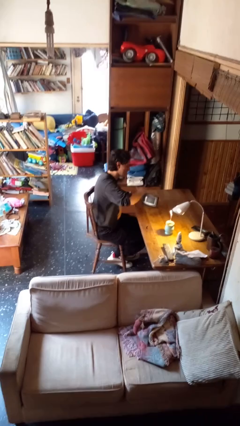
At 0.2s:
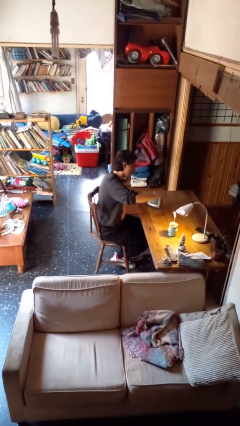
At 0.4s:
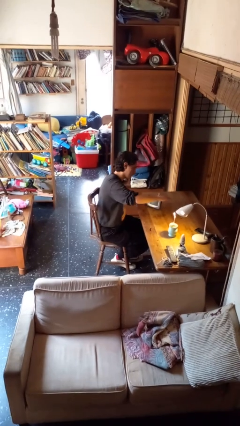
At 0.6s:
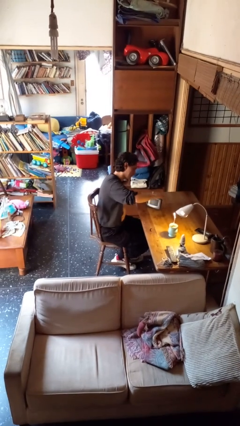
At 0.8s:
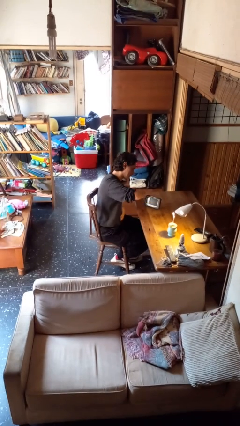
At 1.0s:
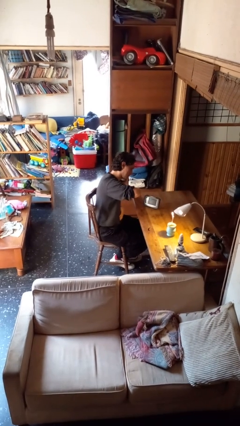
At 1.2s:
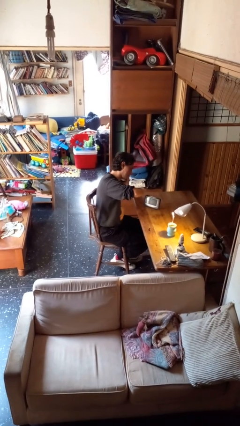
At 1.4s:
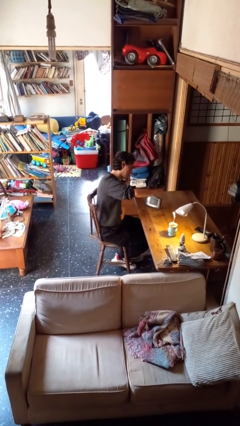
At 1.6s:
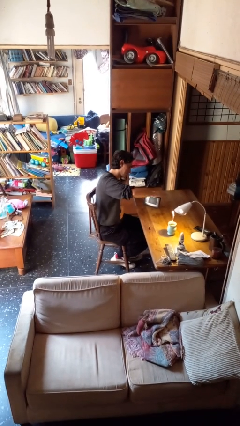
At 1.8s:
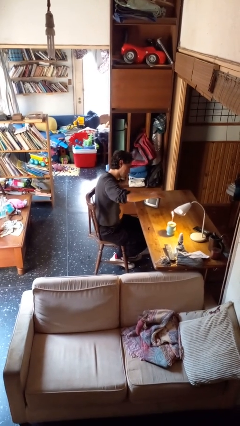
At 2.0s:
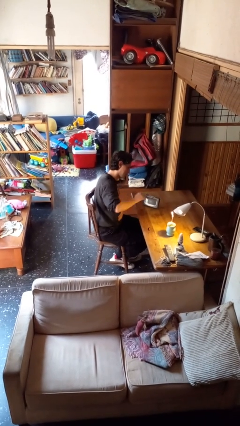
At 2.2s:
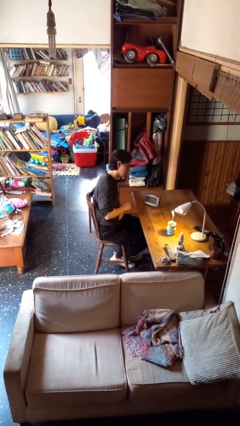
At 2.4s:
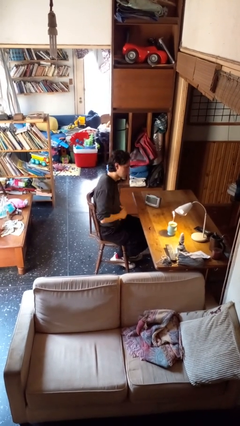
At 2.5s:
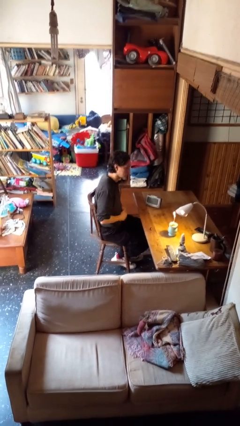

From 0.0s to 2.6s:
person waves hand over object

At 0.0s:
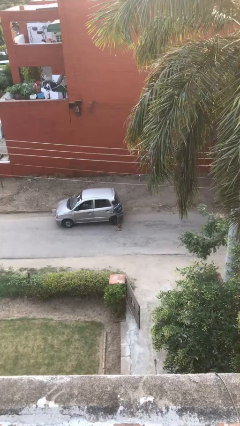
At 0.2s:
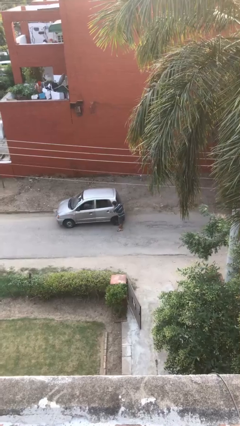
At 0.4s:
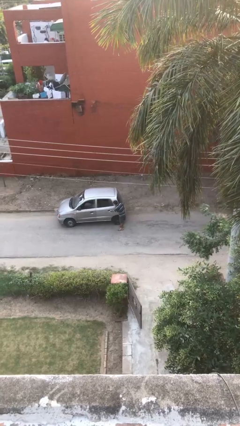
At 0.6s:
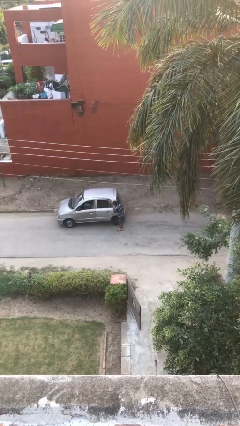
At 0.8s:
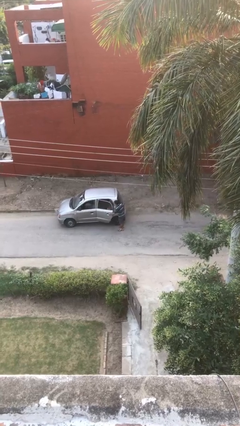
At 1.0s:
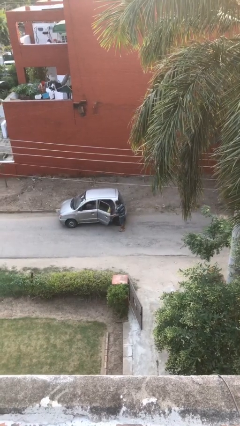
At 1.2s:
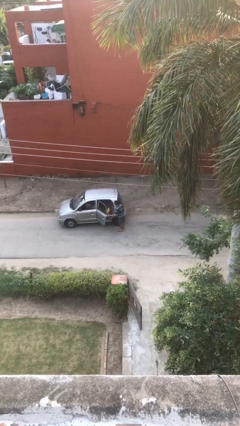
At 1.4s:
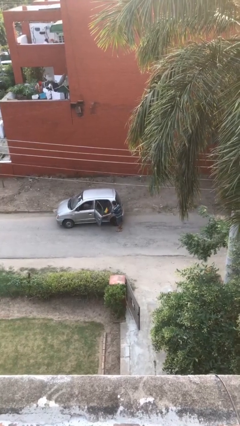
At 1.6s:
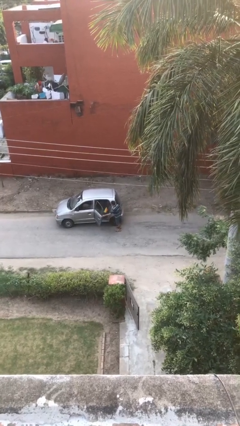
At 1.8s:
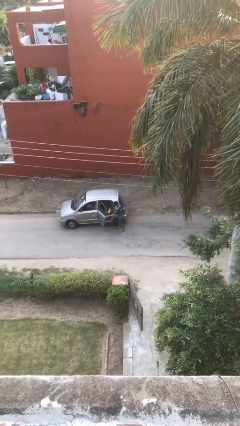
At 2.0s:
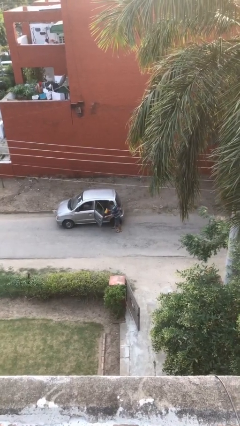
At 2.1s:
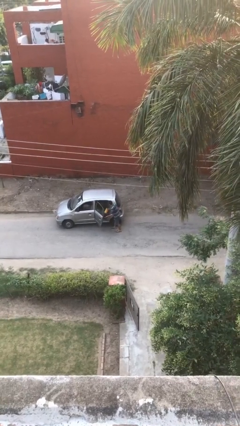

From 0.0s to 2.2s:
person opens car door

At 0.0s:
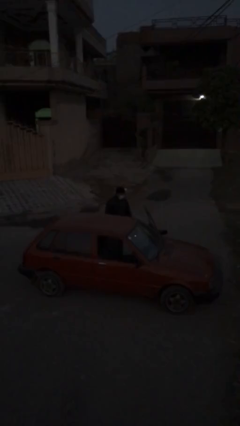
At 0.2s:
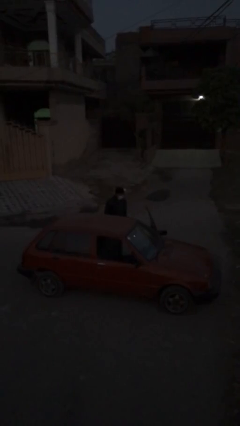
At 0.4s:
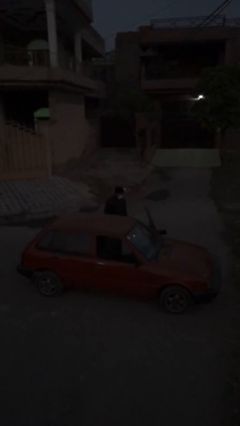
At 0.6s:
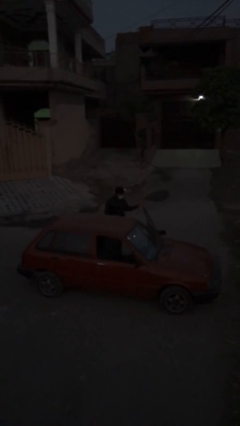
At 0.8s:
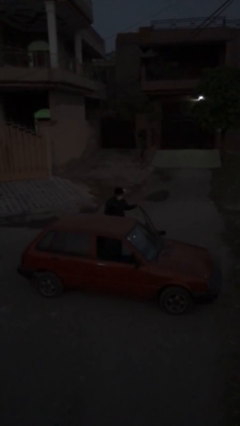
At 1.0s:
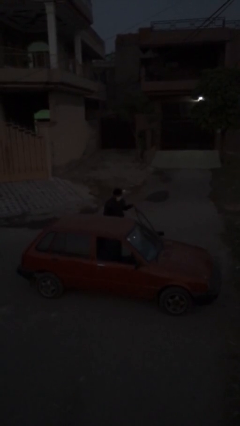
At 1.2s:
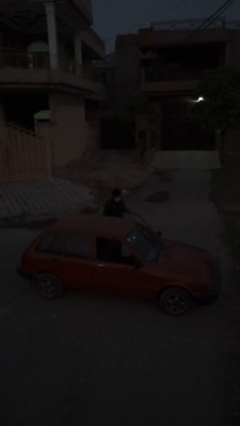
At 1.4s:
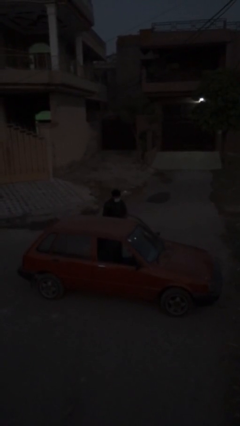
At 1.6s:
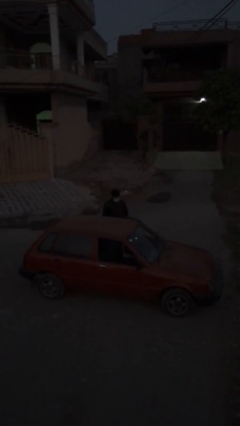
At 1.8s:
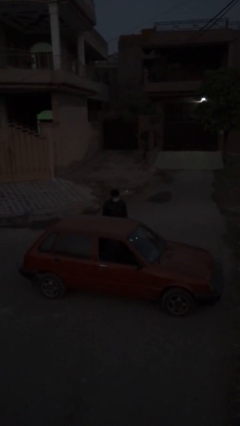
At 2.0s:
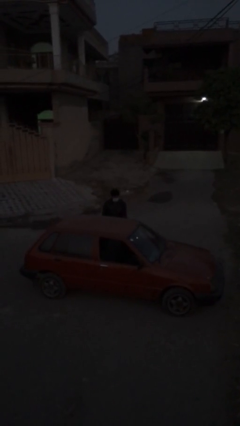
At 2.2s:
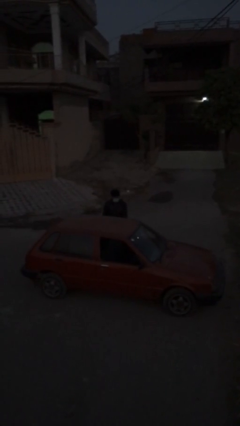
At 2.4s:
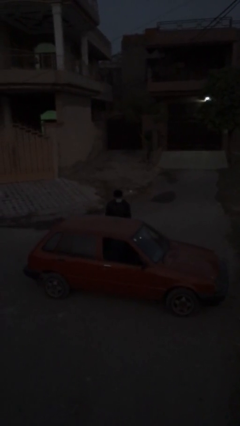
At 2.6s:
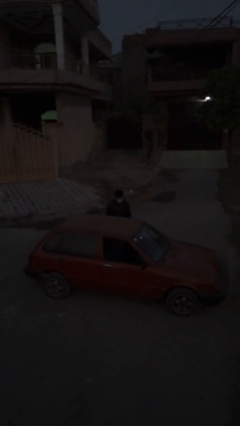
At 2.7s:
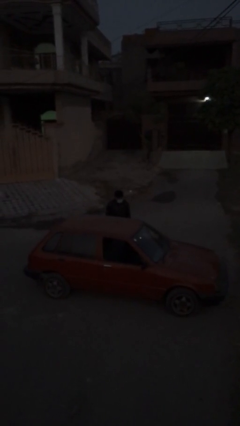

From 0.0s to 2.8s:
person closes car door

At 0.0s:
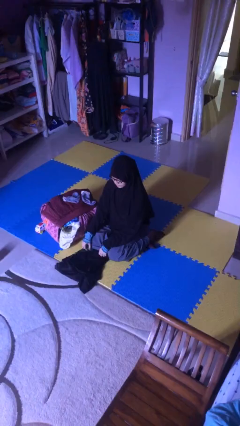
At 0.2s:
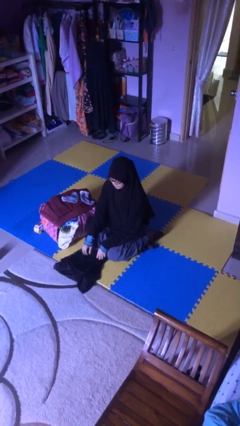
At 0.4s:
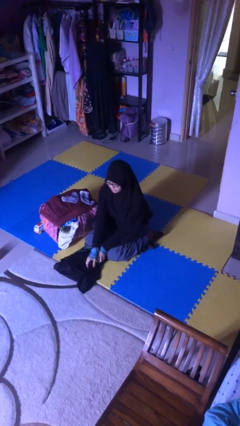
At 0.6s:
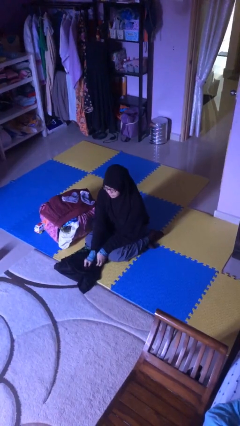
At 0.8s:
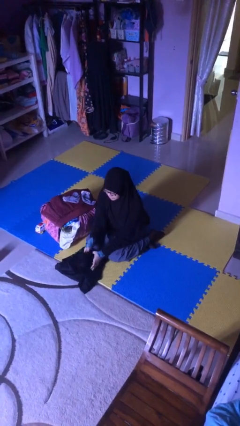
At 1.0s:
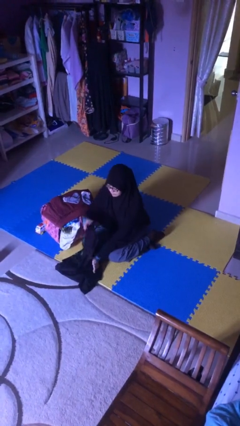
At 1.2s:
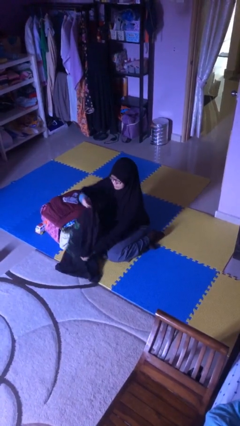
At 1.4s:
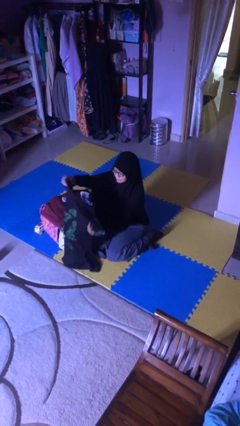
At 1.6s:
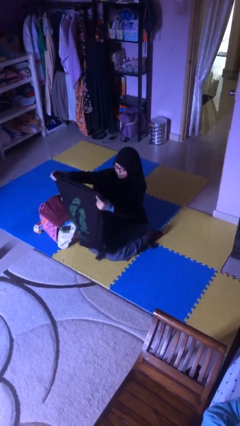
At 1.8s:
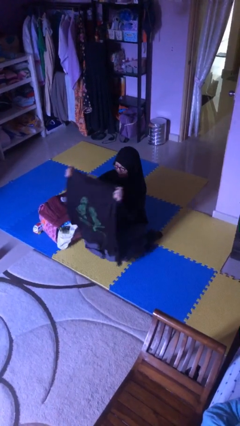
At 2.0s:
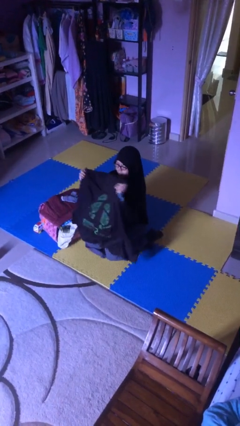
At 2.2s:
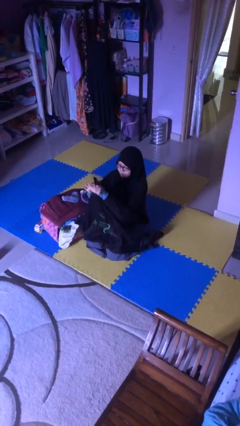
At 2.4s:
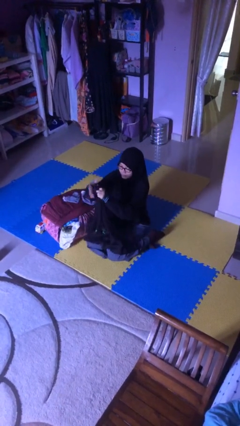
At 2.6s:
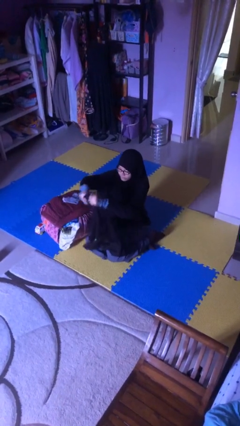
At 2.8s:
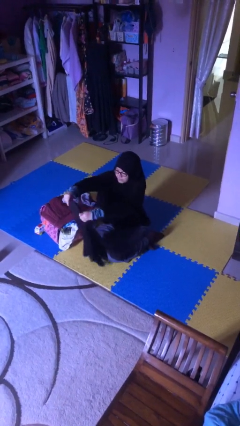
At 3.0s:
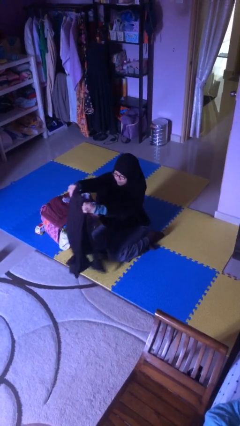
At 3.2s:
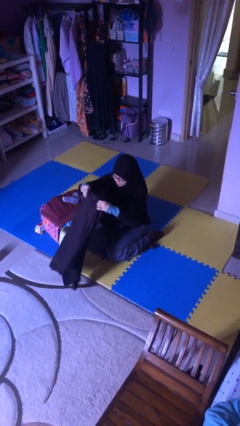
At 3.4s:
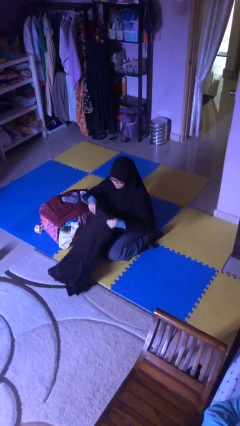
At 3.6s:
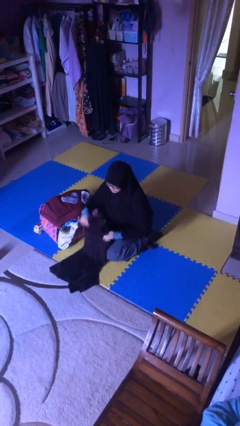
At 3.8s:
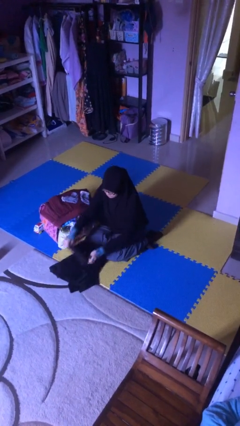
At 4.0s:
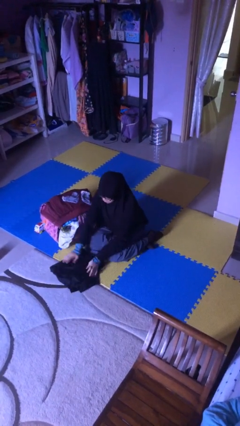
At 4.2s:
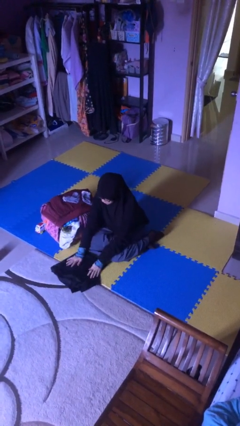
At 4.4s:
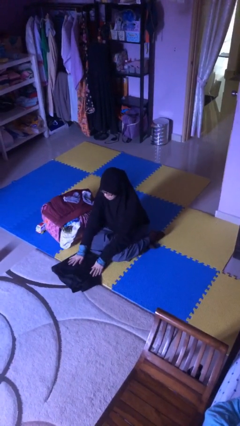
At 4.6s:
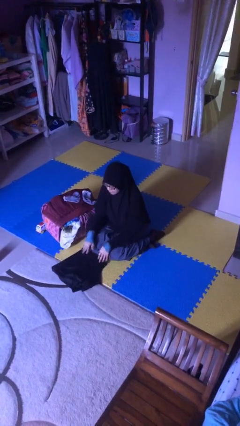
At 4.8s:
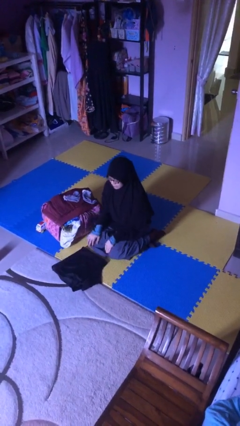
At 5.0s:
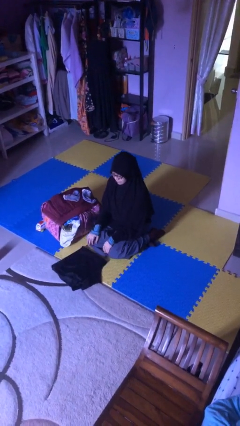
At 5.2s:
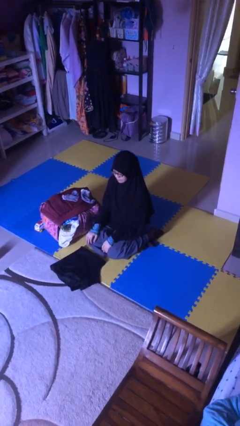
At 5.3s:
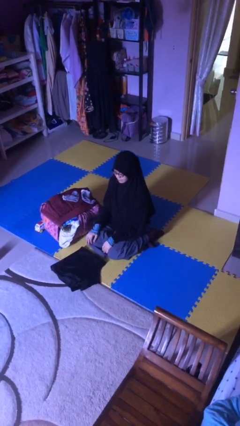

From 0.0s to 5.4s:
person folds shirt

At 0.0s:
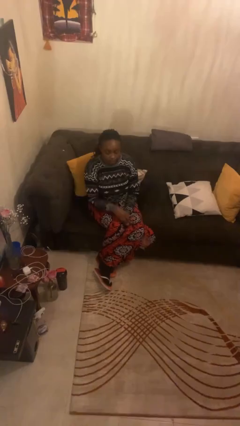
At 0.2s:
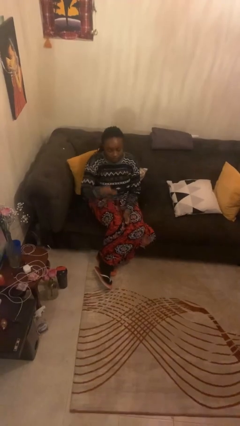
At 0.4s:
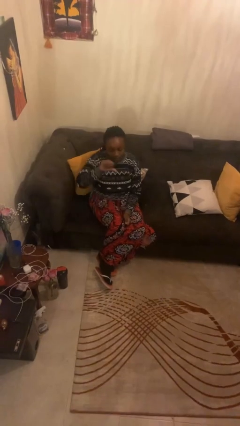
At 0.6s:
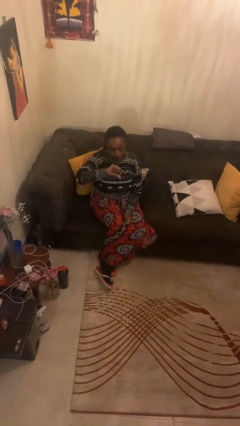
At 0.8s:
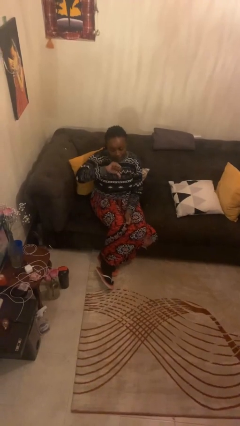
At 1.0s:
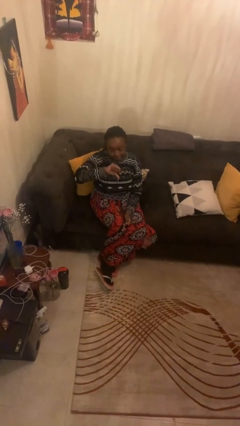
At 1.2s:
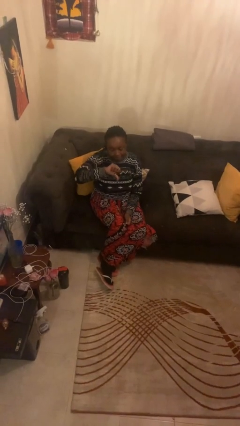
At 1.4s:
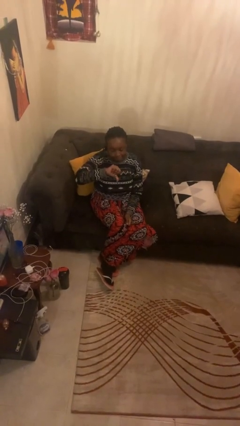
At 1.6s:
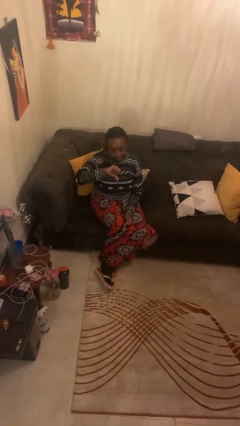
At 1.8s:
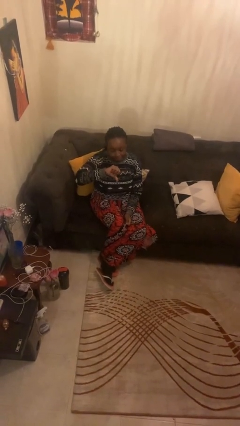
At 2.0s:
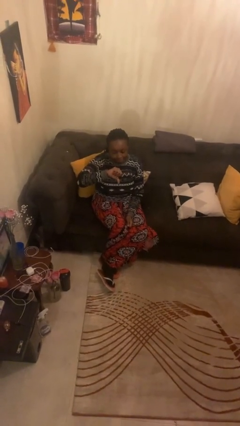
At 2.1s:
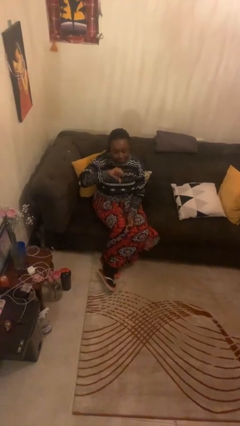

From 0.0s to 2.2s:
person gestures thumbs down

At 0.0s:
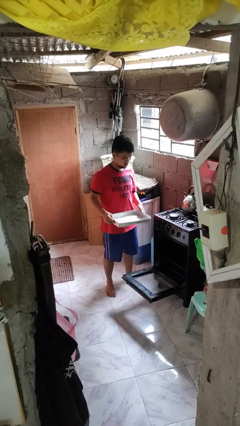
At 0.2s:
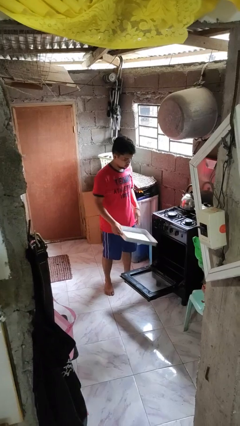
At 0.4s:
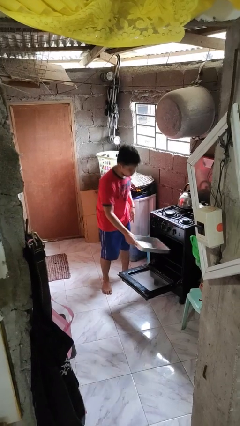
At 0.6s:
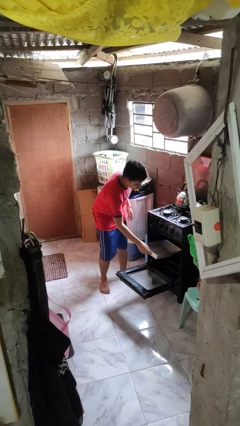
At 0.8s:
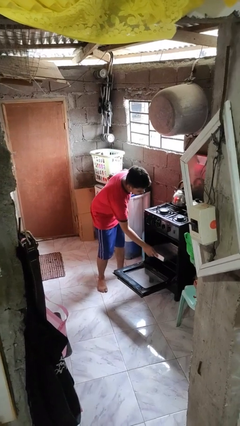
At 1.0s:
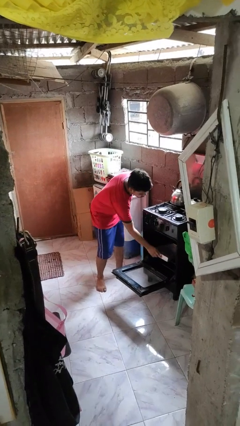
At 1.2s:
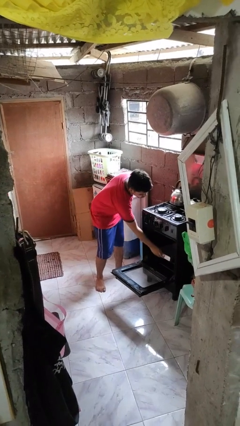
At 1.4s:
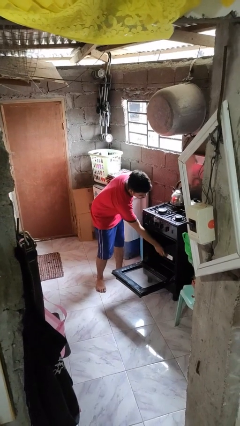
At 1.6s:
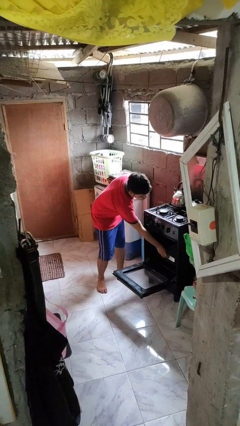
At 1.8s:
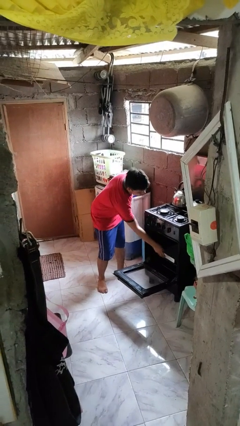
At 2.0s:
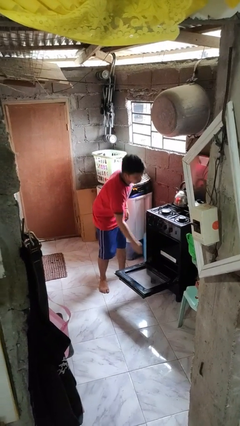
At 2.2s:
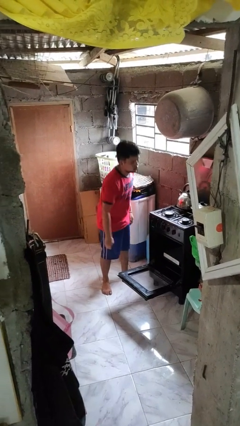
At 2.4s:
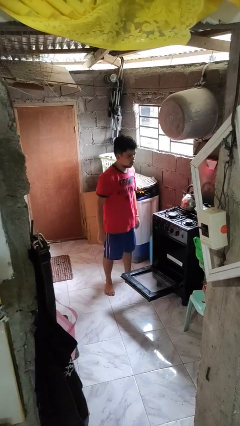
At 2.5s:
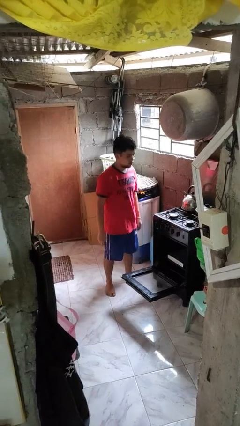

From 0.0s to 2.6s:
person puts object into oven
